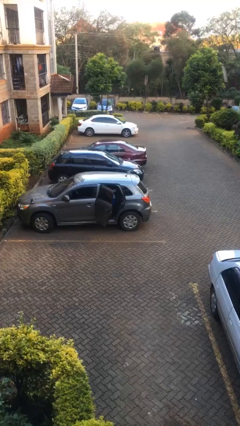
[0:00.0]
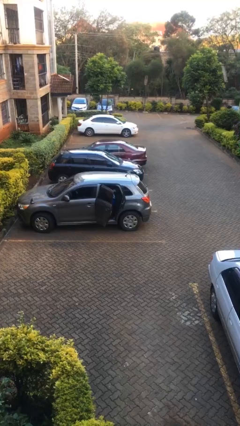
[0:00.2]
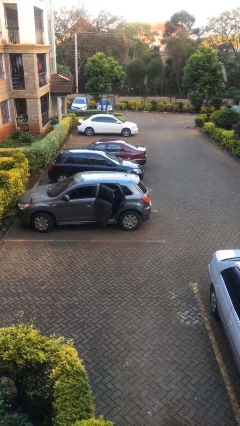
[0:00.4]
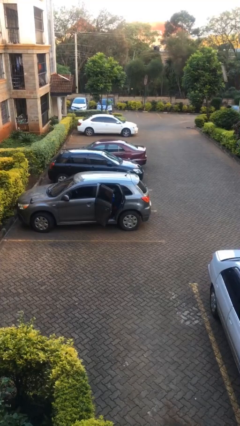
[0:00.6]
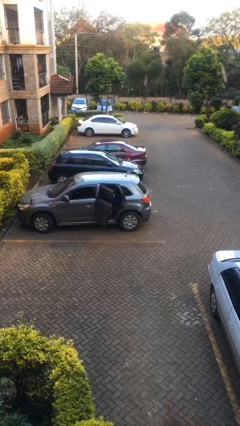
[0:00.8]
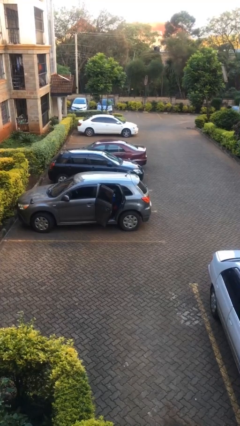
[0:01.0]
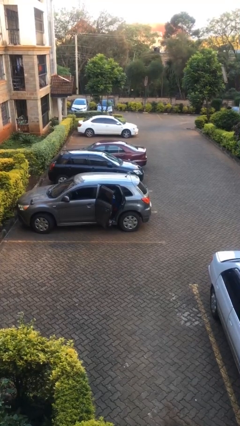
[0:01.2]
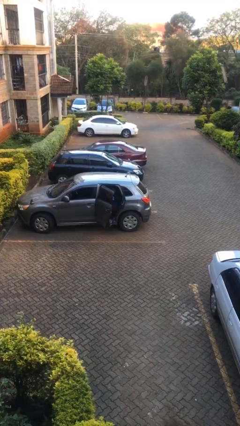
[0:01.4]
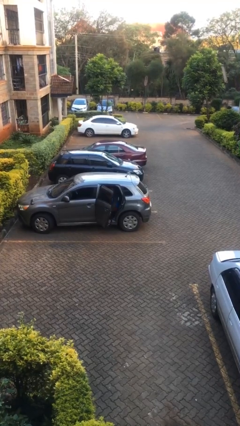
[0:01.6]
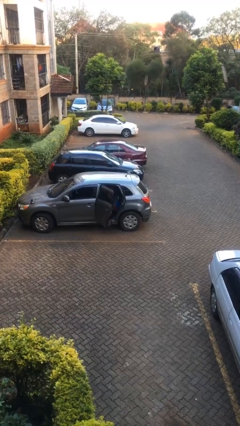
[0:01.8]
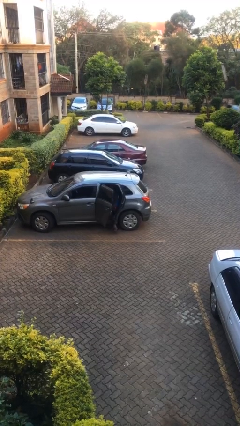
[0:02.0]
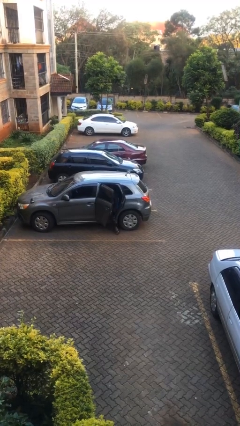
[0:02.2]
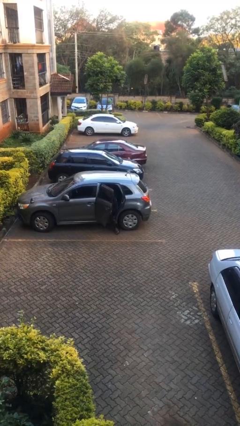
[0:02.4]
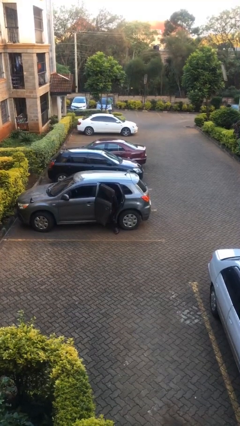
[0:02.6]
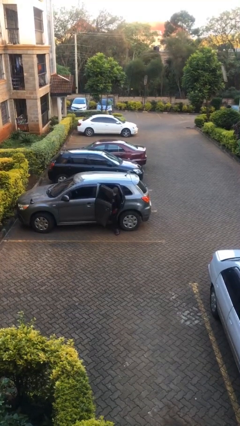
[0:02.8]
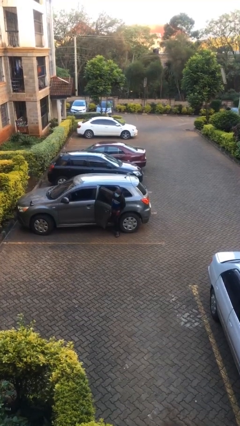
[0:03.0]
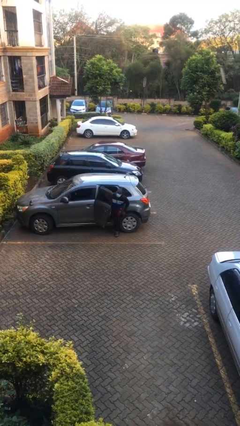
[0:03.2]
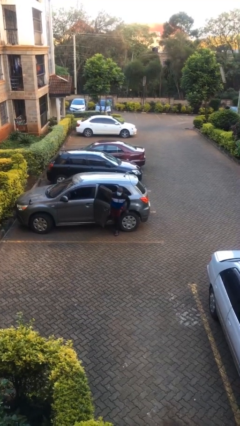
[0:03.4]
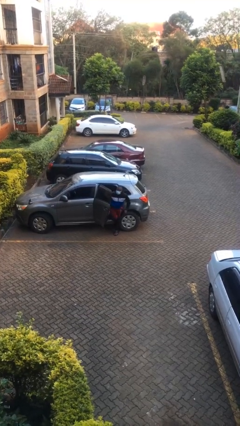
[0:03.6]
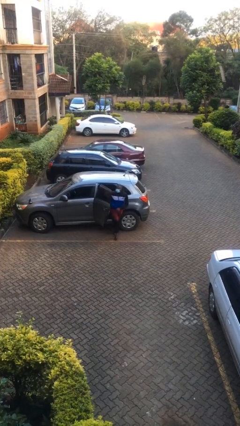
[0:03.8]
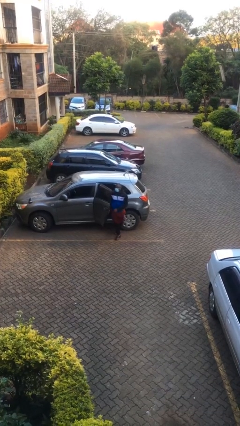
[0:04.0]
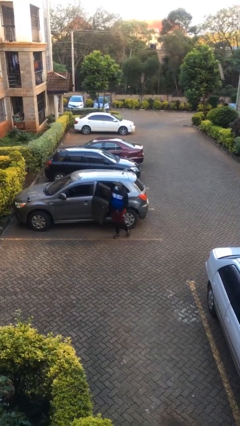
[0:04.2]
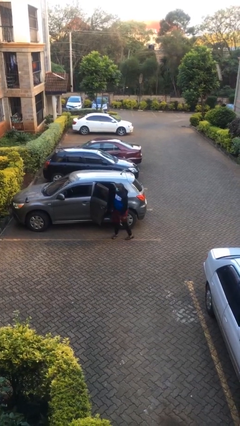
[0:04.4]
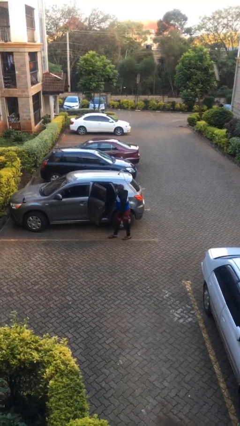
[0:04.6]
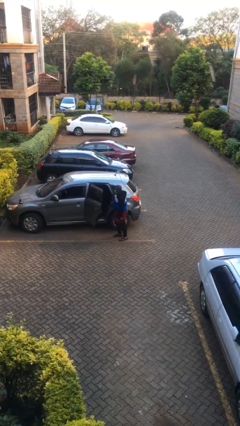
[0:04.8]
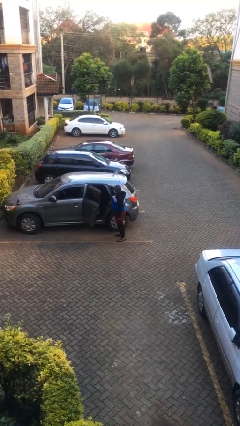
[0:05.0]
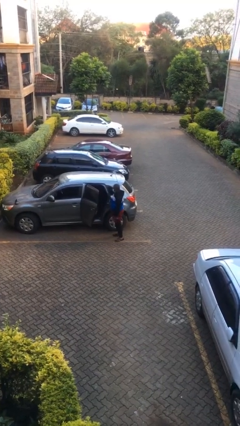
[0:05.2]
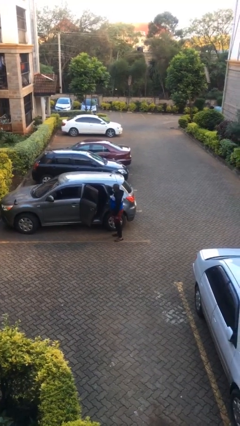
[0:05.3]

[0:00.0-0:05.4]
person exits car

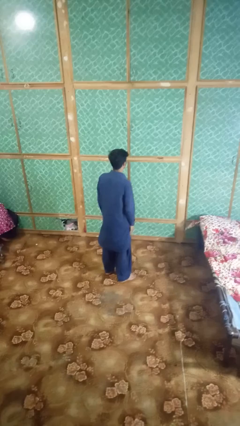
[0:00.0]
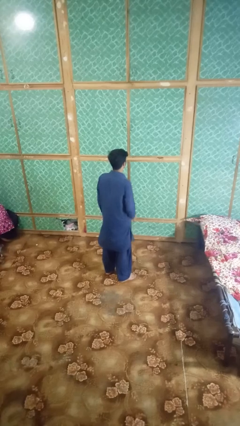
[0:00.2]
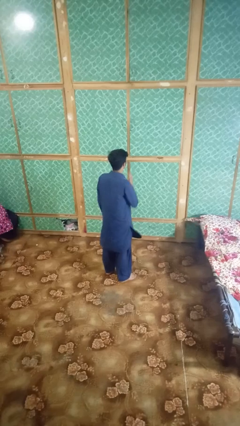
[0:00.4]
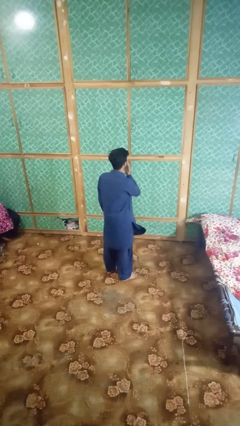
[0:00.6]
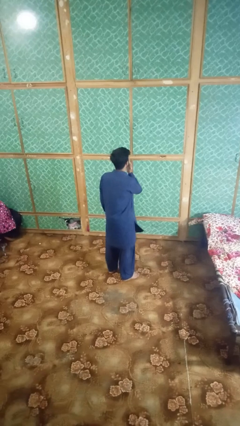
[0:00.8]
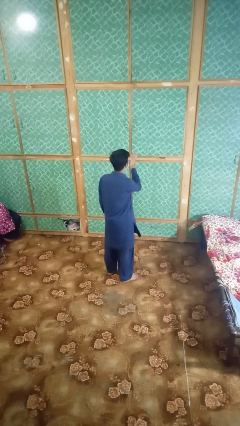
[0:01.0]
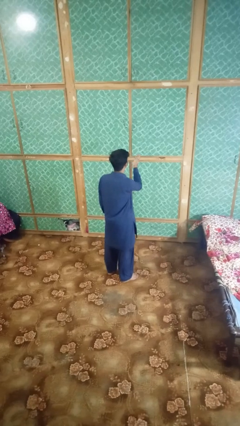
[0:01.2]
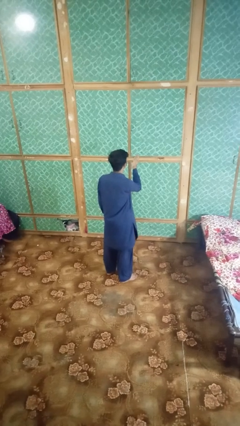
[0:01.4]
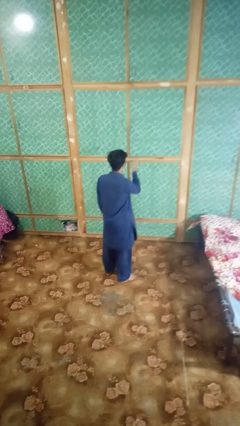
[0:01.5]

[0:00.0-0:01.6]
person gestures blow kiss

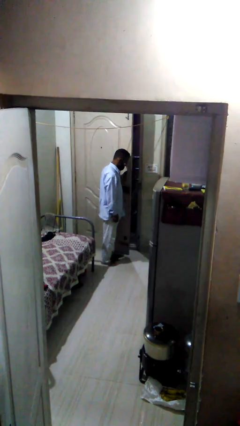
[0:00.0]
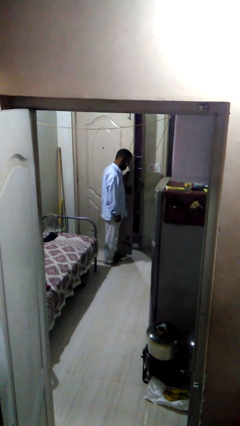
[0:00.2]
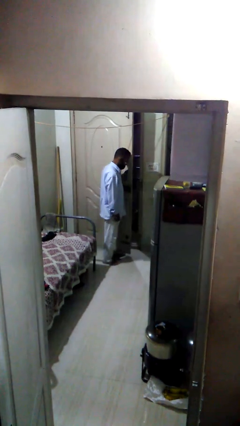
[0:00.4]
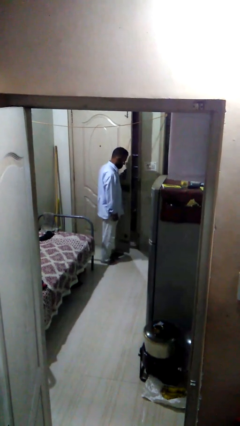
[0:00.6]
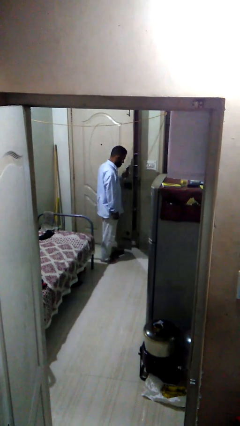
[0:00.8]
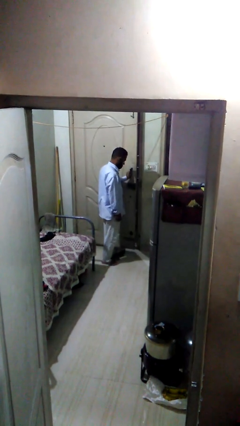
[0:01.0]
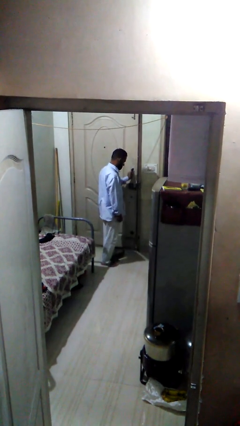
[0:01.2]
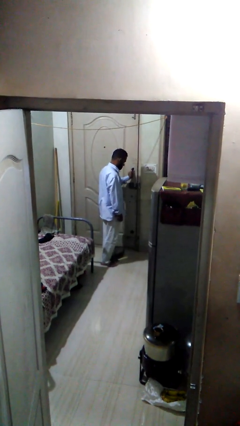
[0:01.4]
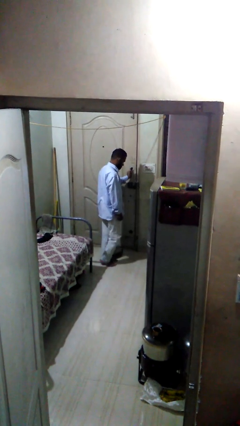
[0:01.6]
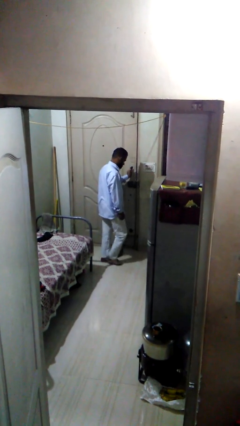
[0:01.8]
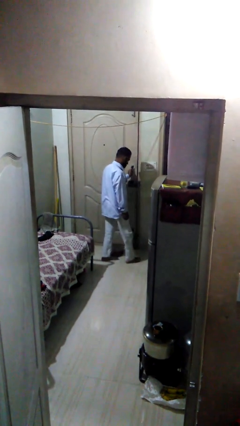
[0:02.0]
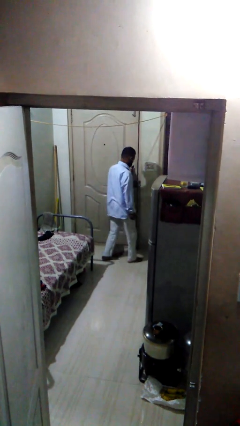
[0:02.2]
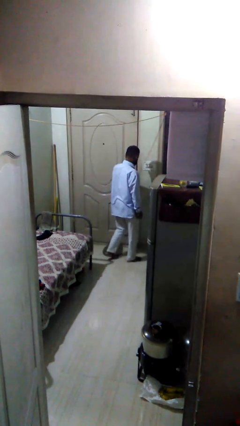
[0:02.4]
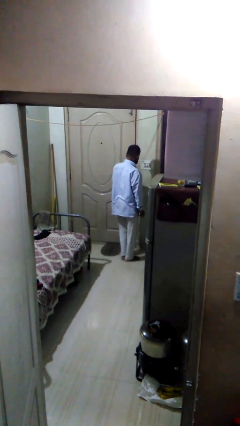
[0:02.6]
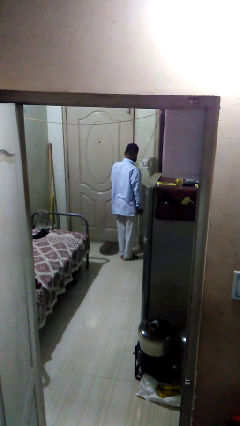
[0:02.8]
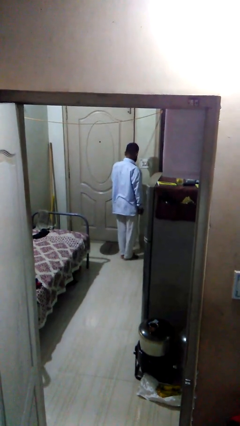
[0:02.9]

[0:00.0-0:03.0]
person closes facility door

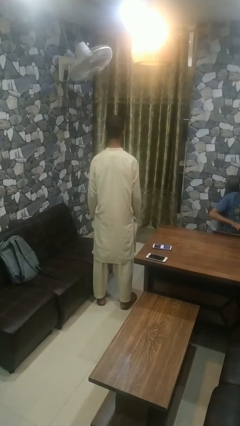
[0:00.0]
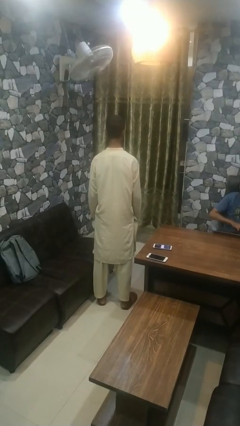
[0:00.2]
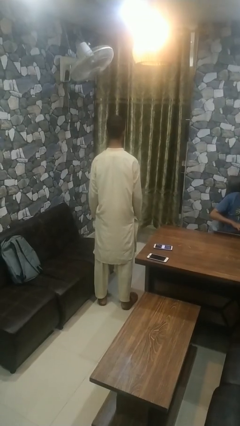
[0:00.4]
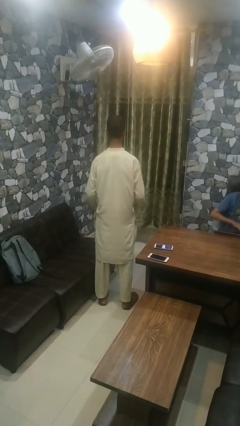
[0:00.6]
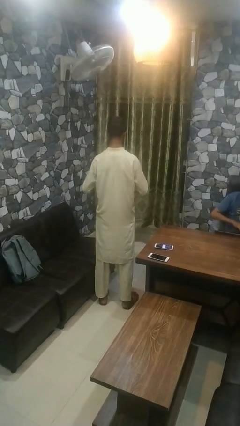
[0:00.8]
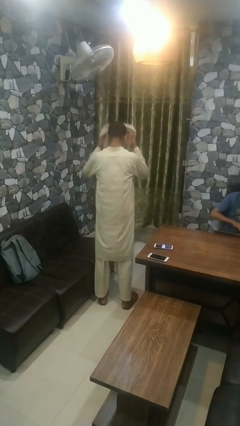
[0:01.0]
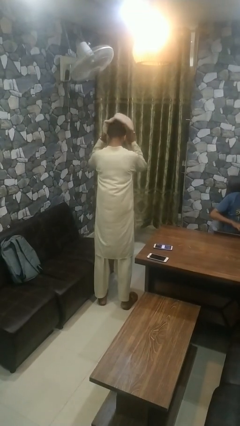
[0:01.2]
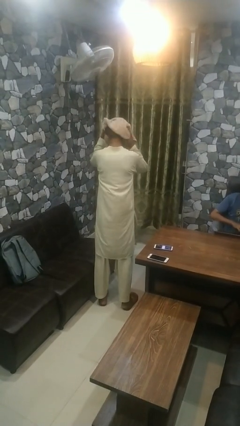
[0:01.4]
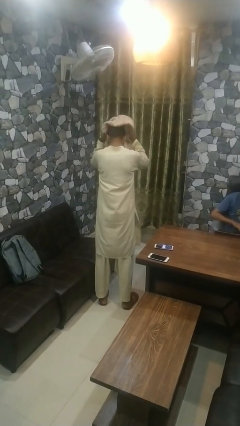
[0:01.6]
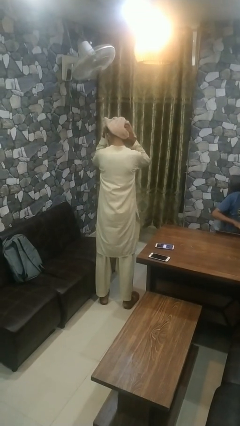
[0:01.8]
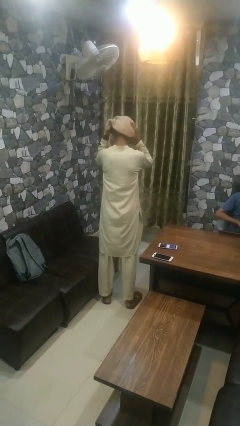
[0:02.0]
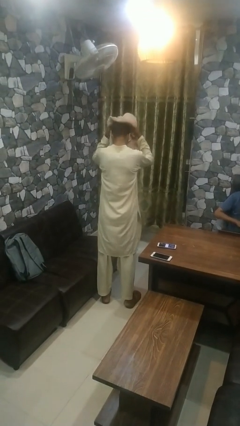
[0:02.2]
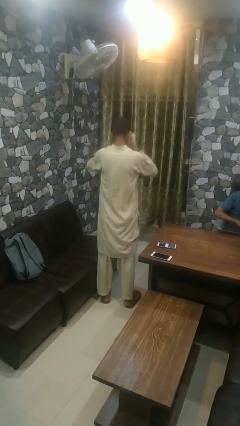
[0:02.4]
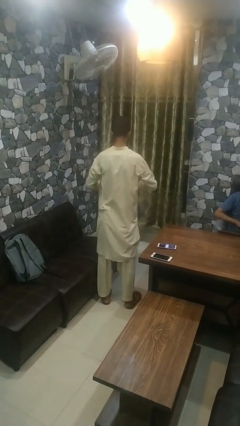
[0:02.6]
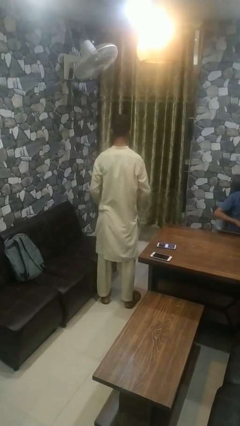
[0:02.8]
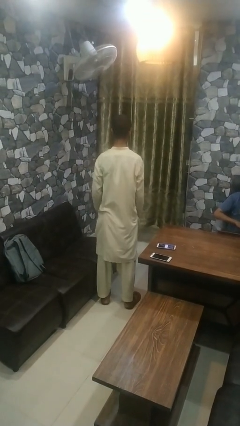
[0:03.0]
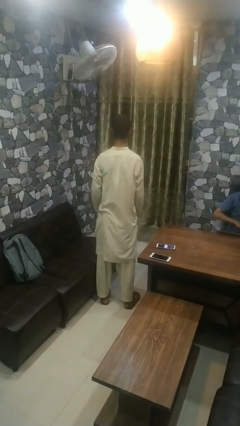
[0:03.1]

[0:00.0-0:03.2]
person dries hair with towel

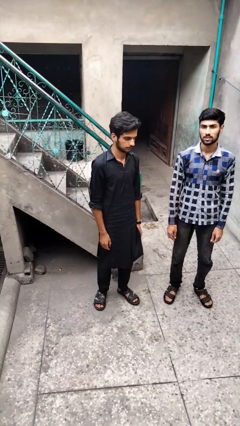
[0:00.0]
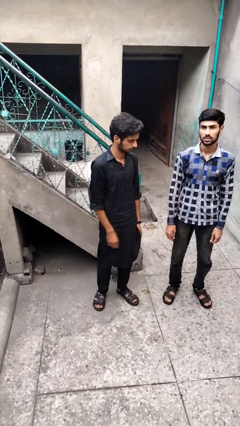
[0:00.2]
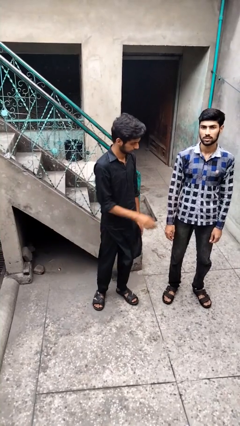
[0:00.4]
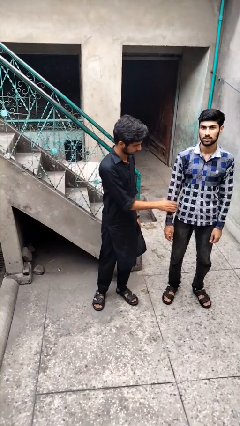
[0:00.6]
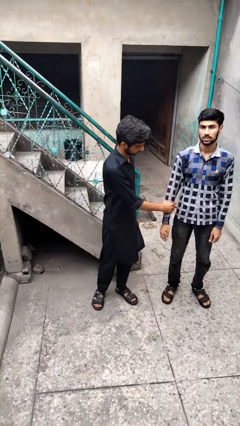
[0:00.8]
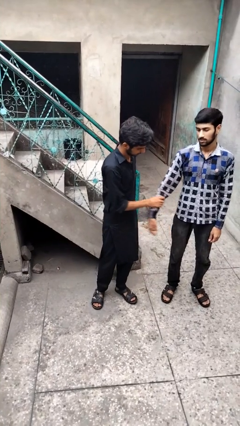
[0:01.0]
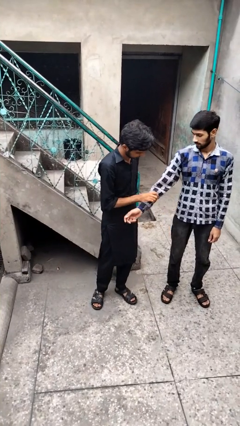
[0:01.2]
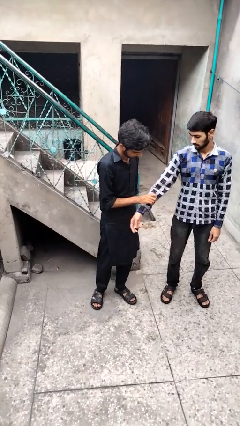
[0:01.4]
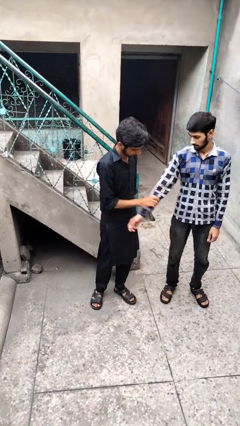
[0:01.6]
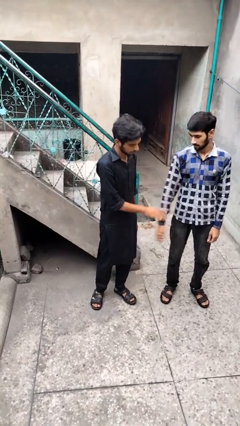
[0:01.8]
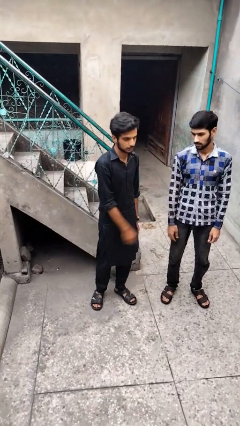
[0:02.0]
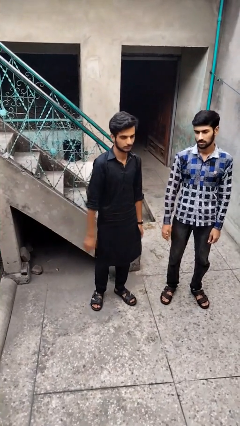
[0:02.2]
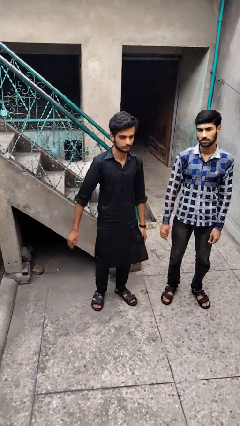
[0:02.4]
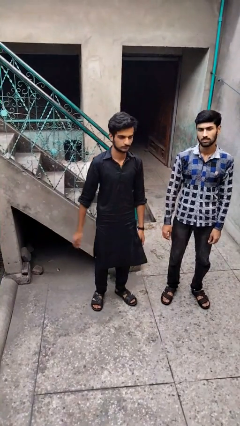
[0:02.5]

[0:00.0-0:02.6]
person grabs person by forearm

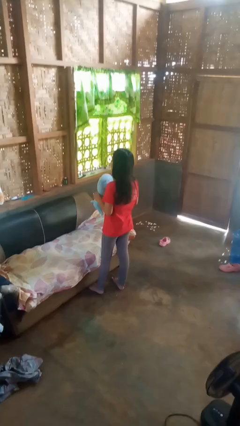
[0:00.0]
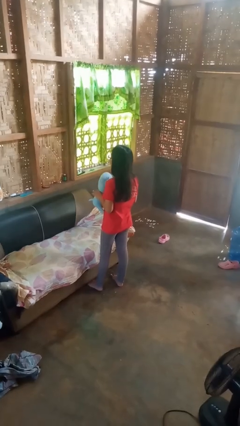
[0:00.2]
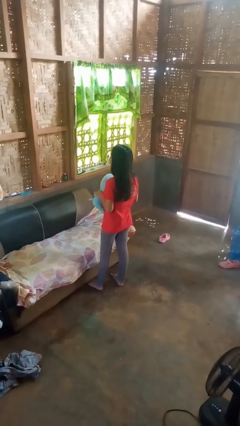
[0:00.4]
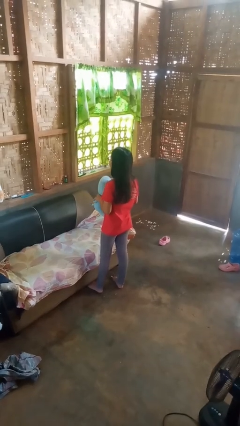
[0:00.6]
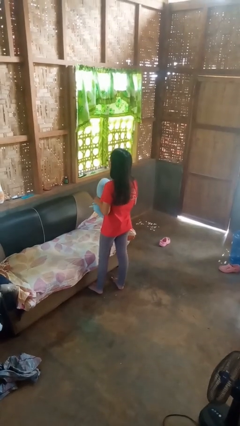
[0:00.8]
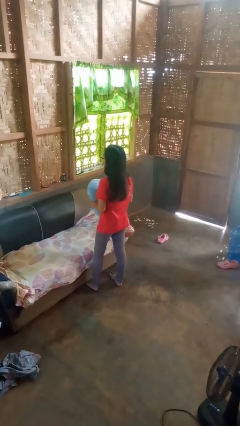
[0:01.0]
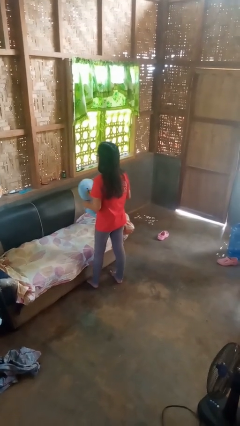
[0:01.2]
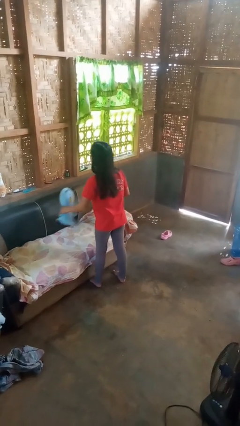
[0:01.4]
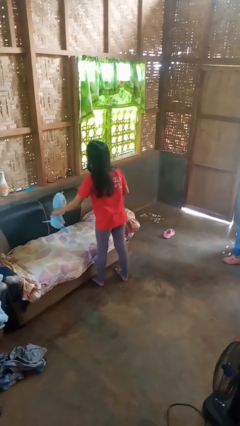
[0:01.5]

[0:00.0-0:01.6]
person puts down object on couch

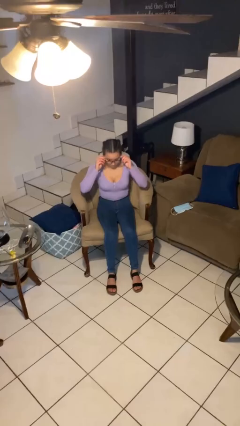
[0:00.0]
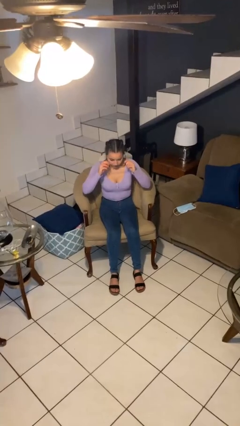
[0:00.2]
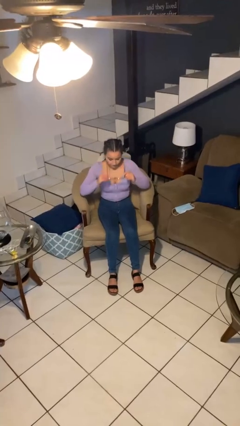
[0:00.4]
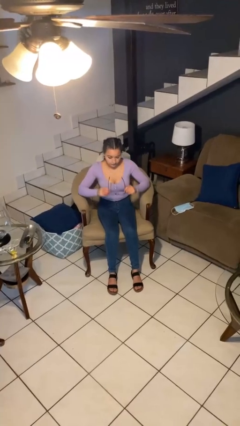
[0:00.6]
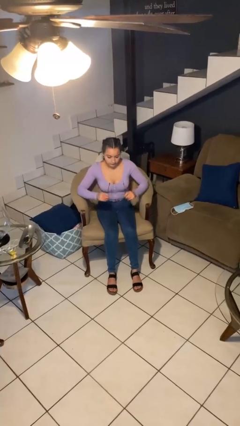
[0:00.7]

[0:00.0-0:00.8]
person takes off glasses
